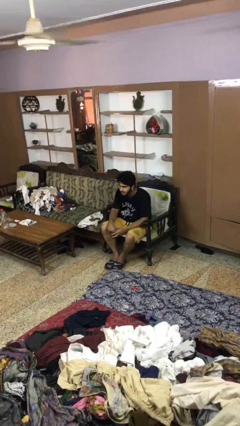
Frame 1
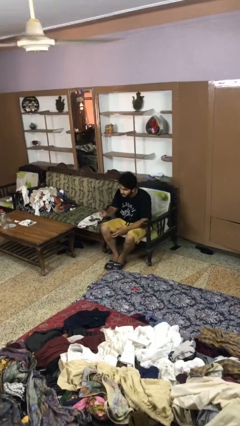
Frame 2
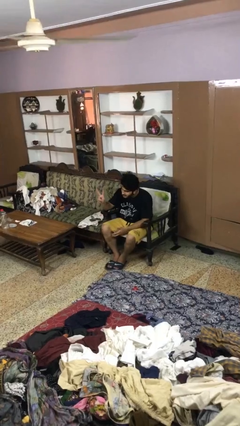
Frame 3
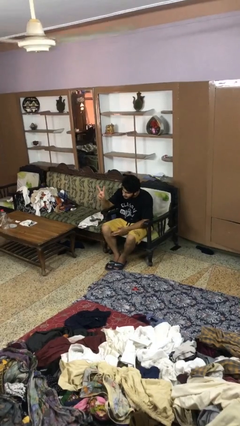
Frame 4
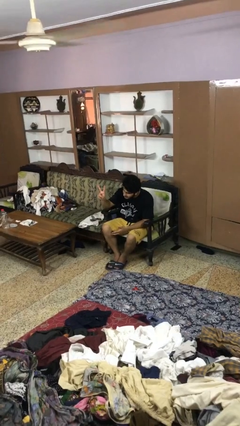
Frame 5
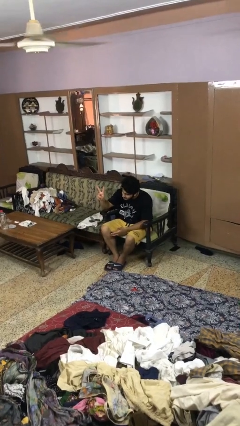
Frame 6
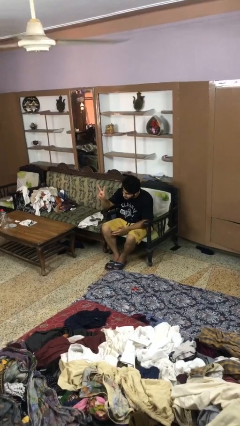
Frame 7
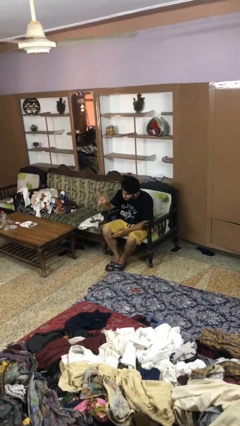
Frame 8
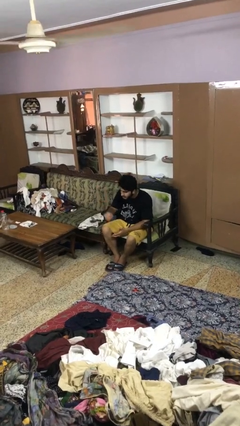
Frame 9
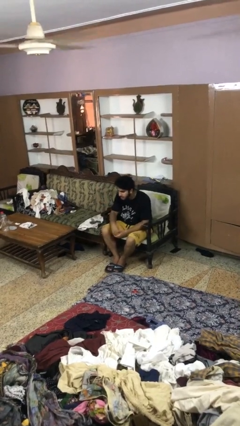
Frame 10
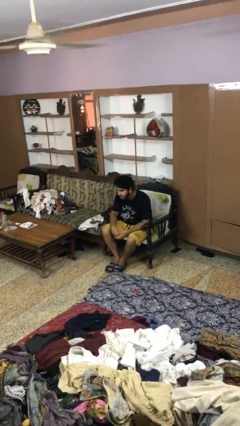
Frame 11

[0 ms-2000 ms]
person gestures peace

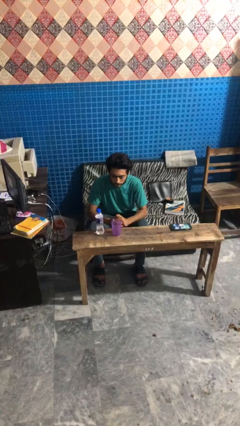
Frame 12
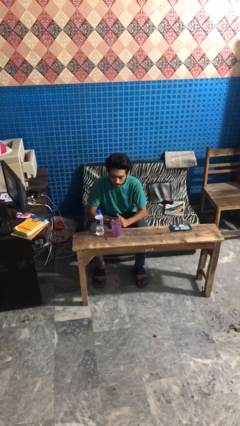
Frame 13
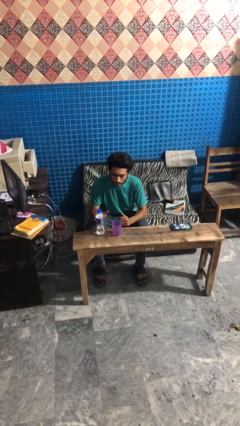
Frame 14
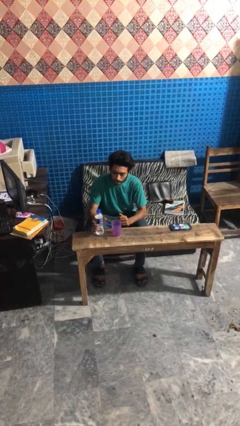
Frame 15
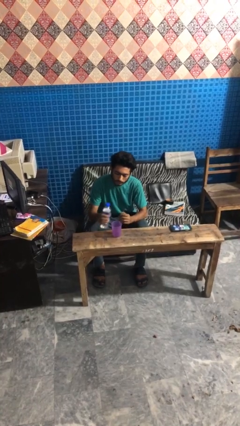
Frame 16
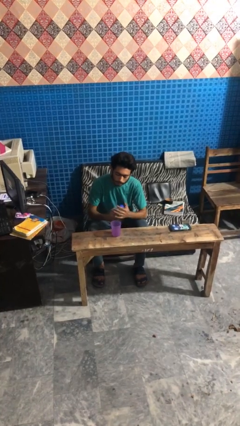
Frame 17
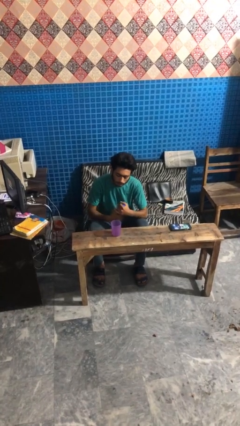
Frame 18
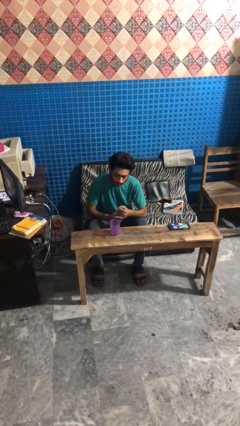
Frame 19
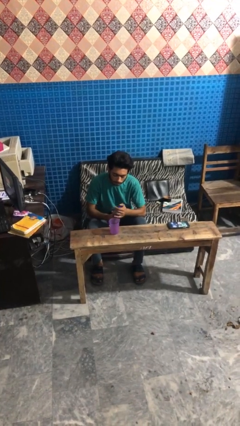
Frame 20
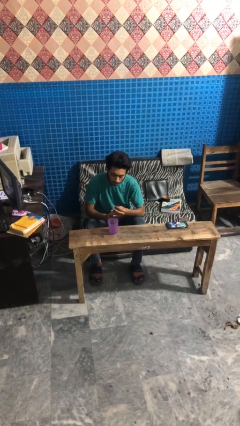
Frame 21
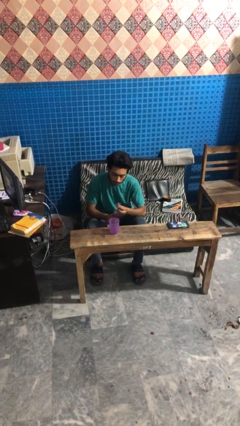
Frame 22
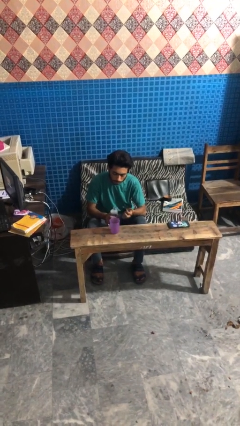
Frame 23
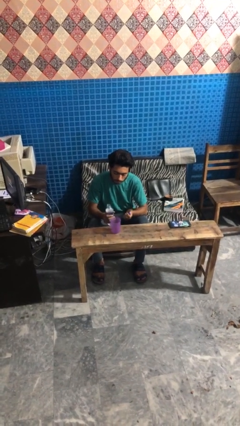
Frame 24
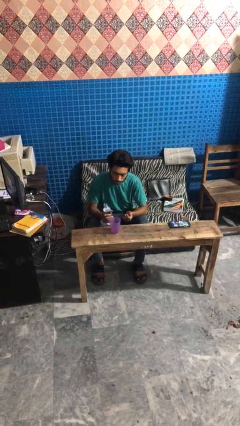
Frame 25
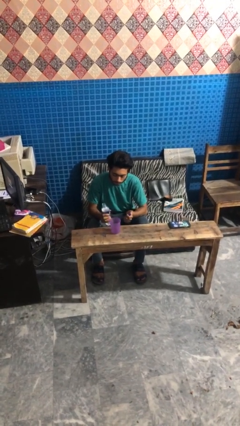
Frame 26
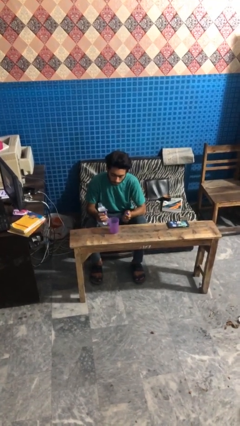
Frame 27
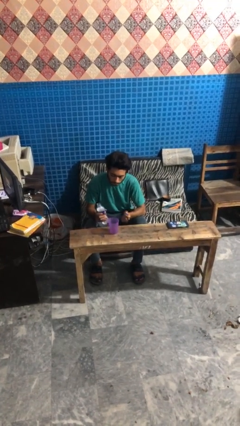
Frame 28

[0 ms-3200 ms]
person unscrews lid from bottle

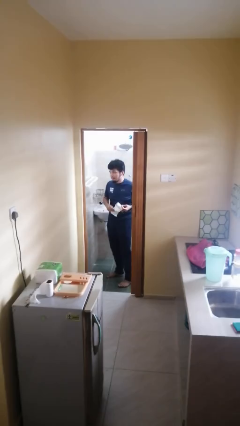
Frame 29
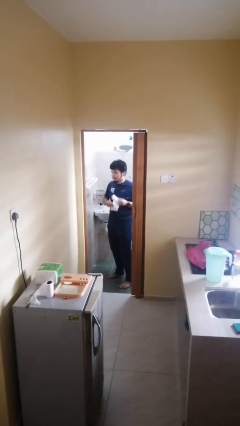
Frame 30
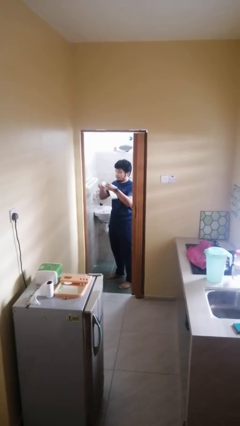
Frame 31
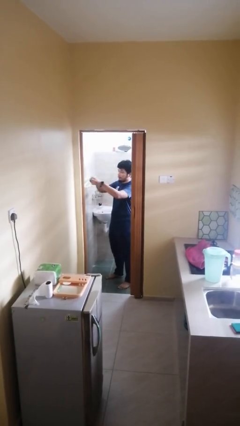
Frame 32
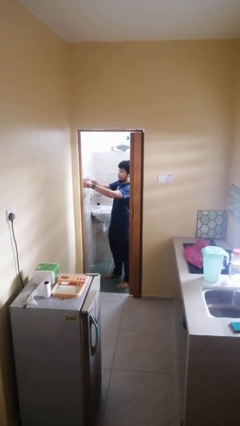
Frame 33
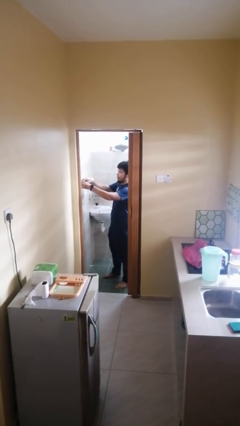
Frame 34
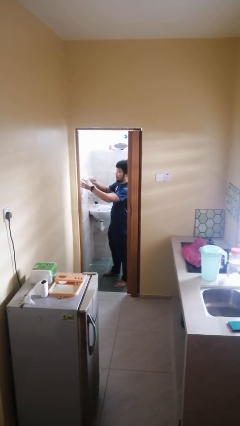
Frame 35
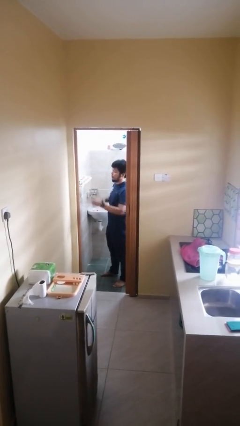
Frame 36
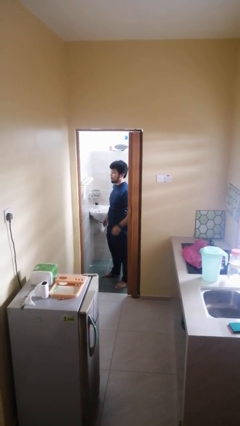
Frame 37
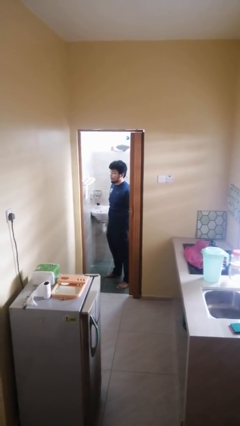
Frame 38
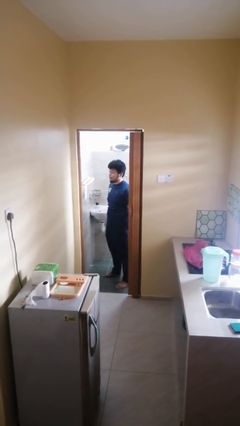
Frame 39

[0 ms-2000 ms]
person puts down object on countertop

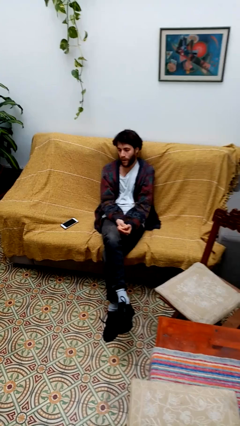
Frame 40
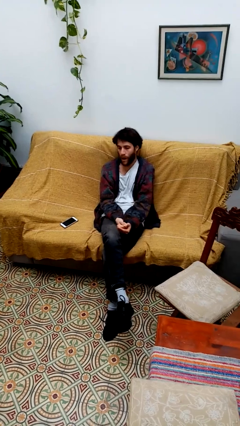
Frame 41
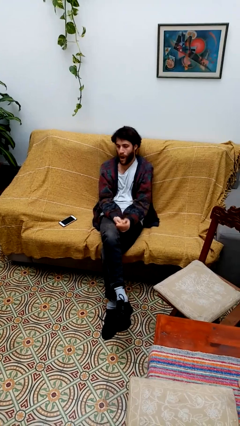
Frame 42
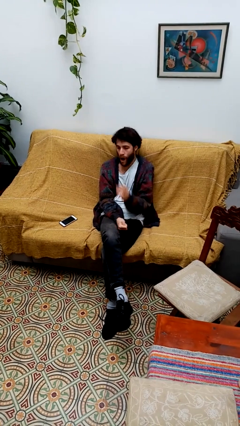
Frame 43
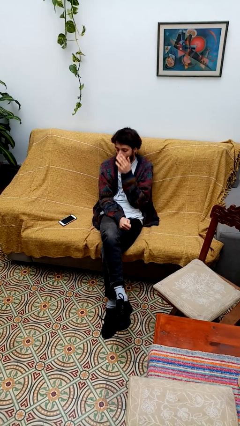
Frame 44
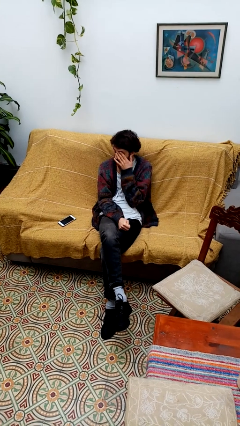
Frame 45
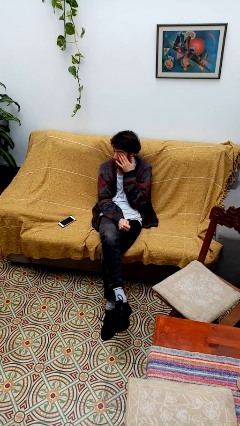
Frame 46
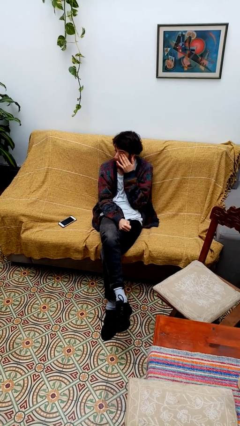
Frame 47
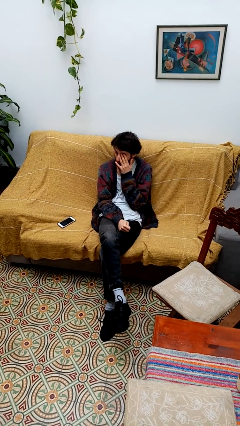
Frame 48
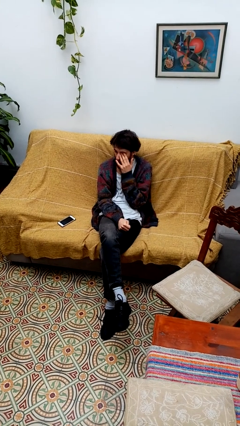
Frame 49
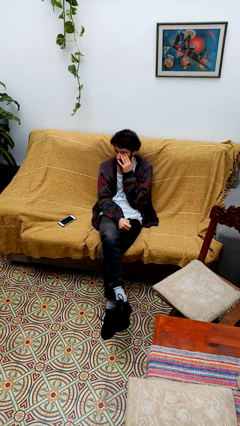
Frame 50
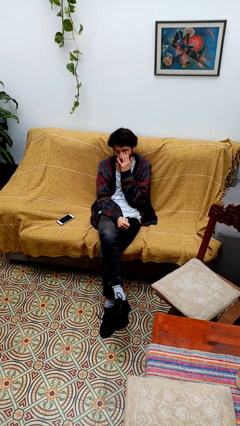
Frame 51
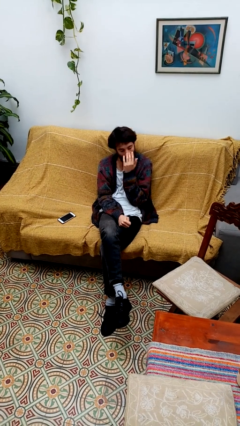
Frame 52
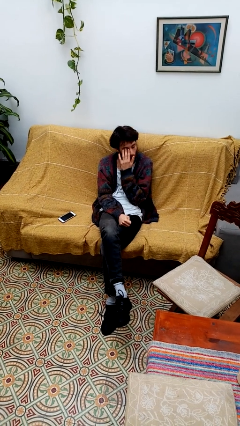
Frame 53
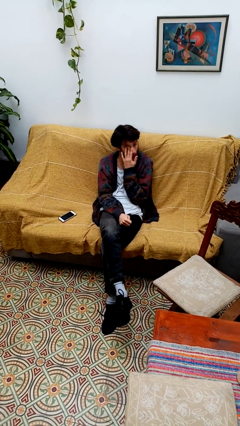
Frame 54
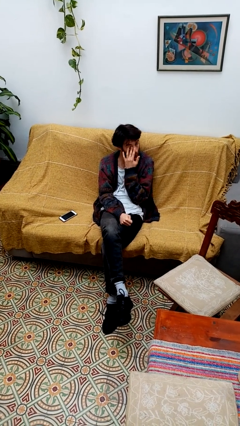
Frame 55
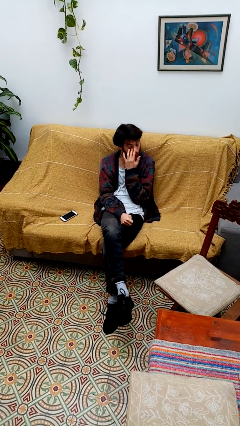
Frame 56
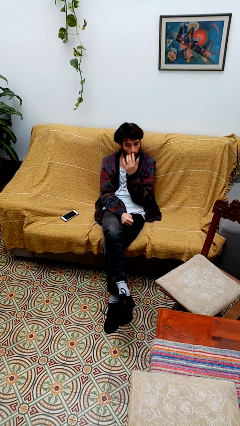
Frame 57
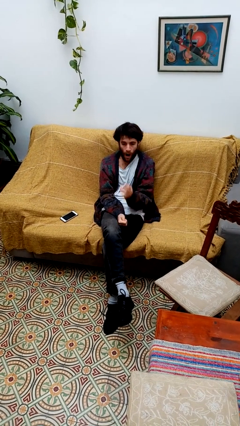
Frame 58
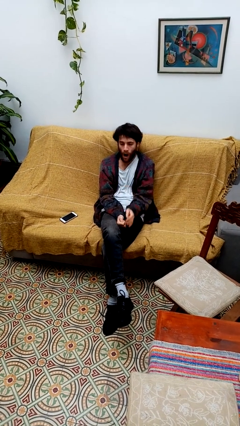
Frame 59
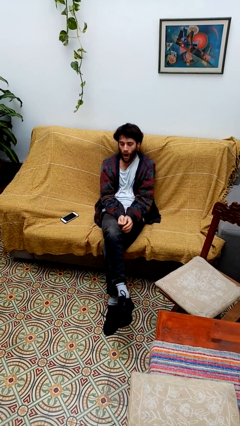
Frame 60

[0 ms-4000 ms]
person rubs eyes

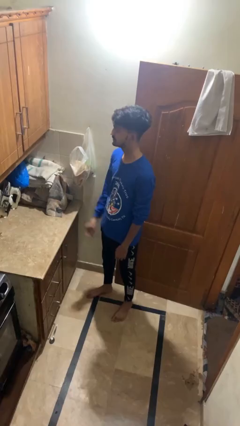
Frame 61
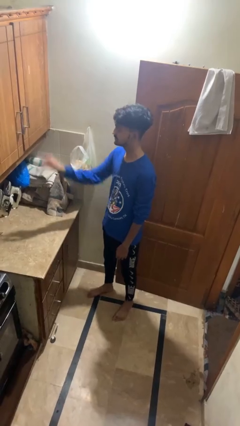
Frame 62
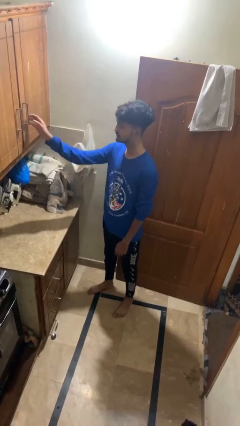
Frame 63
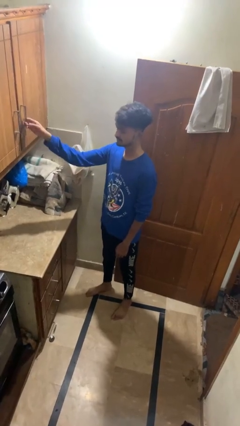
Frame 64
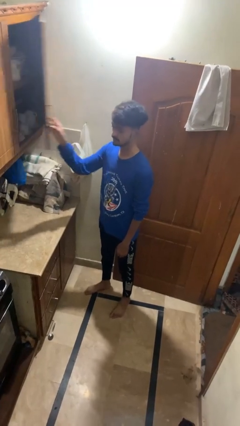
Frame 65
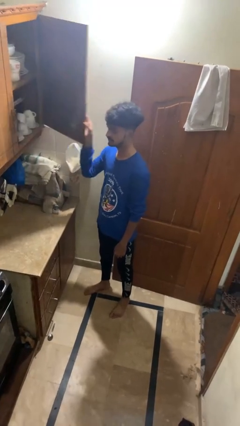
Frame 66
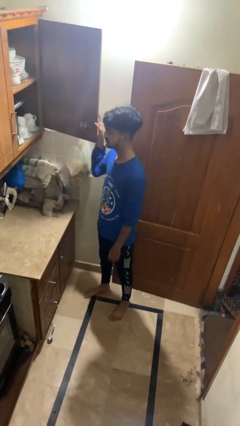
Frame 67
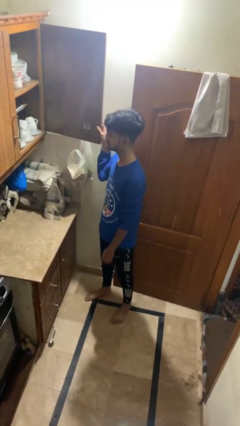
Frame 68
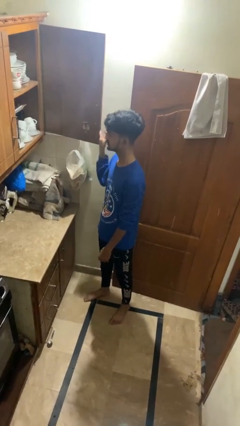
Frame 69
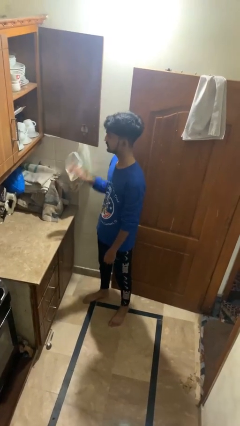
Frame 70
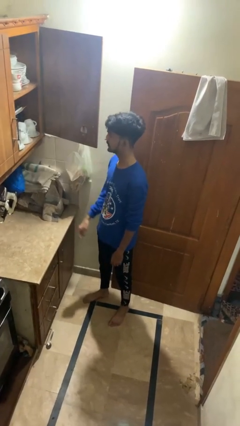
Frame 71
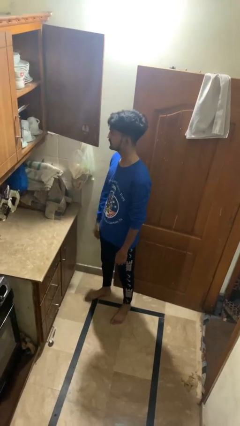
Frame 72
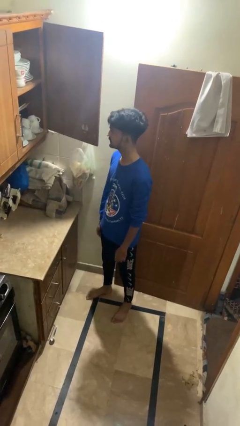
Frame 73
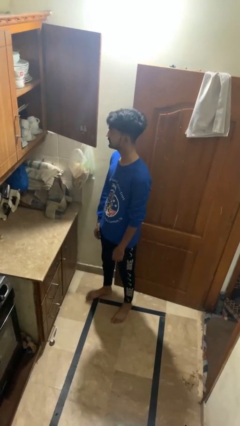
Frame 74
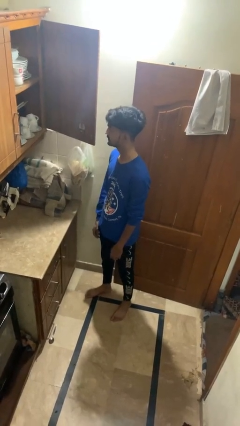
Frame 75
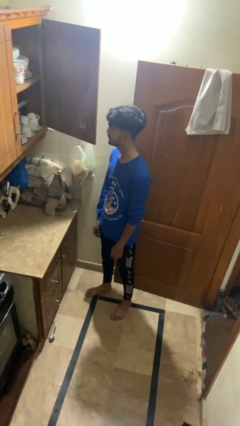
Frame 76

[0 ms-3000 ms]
person opens cabinet

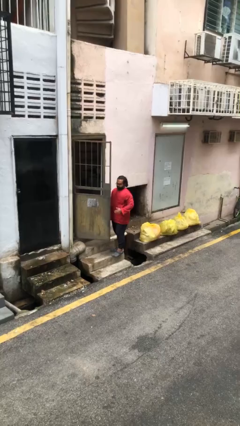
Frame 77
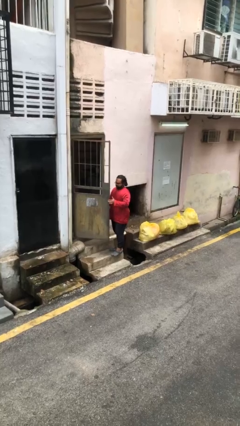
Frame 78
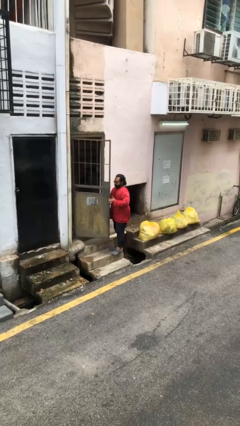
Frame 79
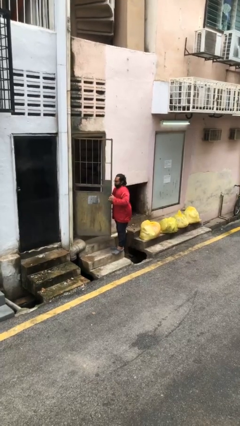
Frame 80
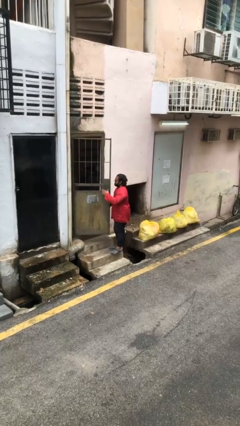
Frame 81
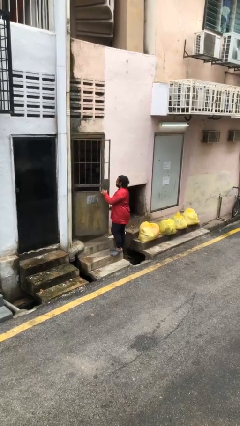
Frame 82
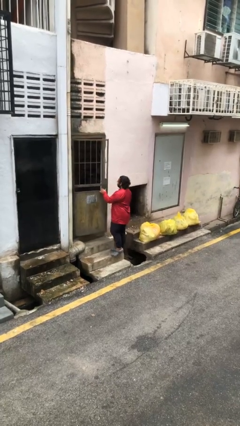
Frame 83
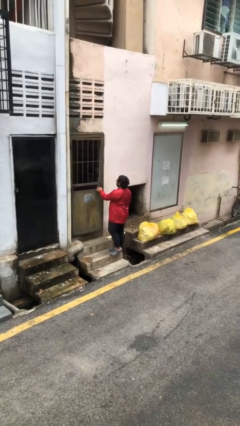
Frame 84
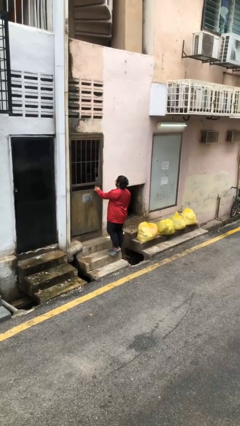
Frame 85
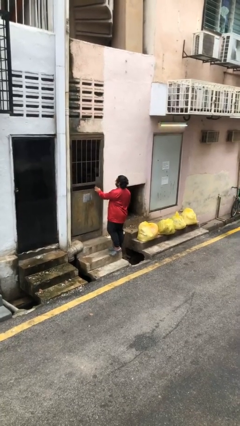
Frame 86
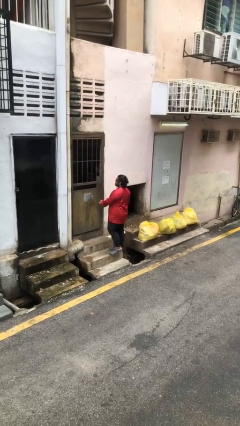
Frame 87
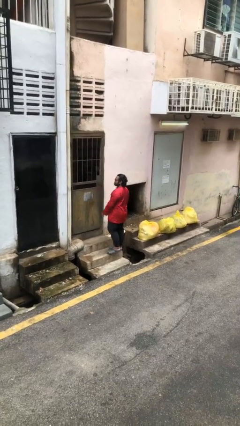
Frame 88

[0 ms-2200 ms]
person closes facility door

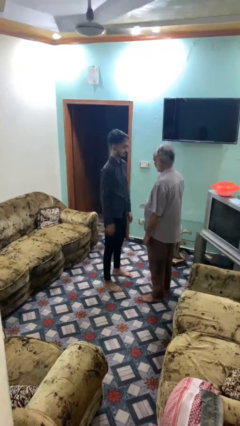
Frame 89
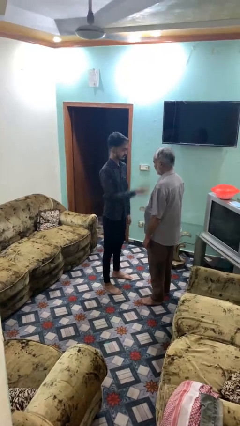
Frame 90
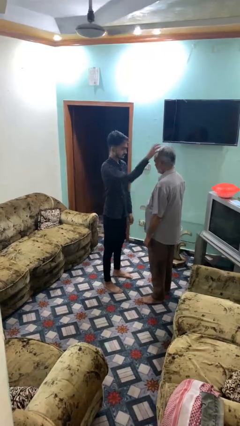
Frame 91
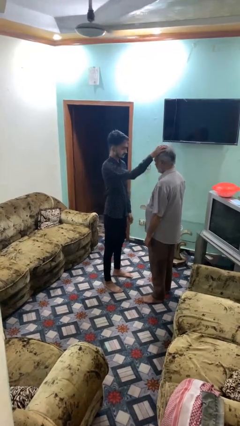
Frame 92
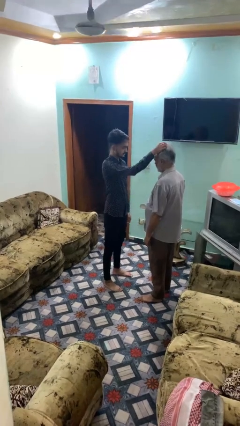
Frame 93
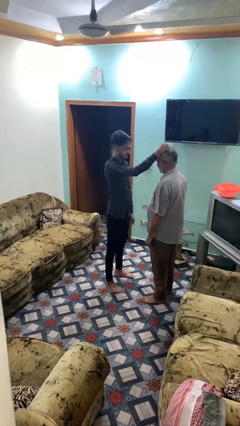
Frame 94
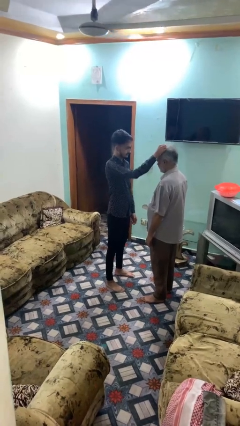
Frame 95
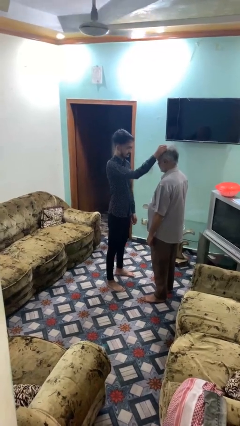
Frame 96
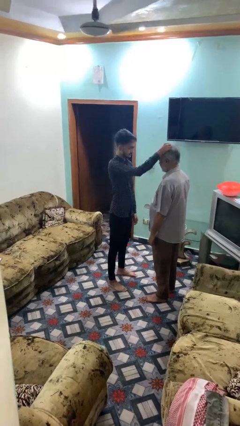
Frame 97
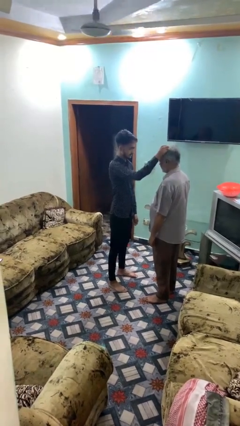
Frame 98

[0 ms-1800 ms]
person grabs person by hair
